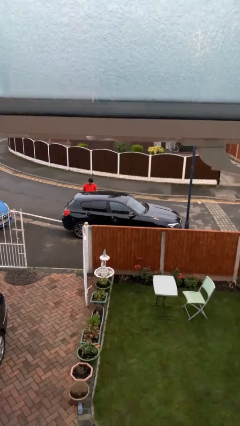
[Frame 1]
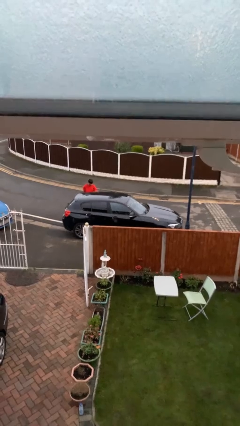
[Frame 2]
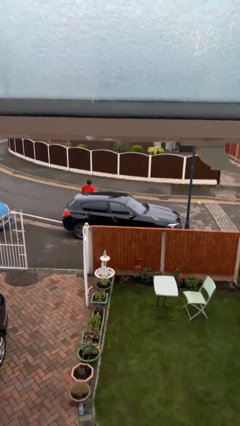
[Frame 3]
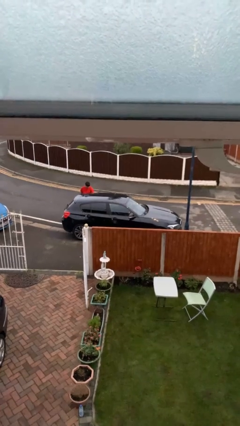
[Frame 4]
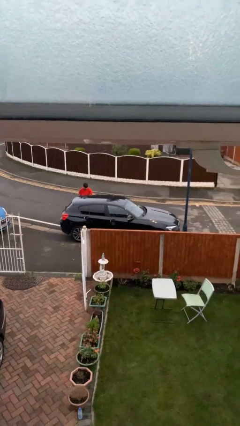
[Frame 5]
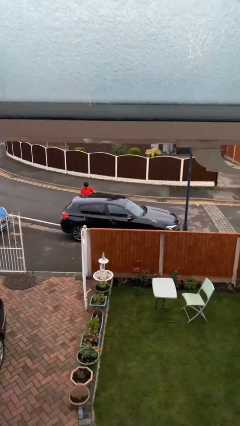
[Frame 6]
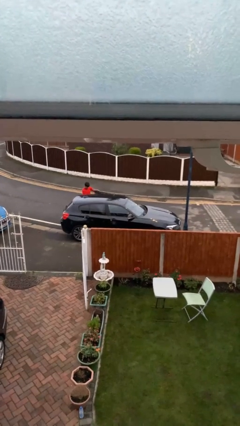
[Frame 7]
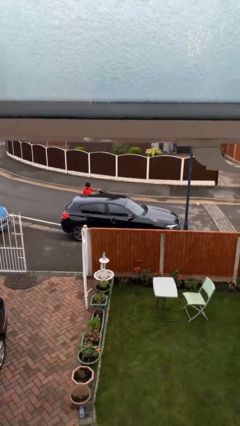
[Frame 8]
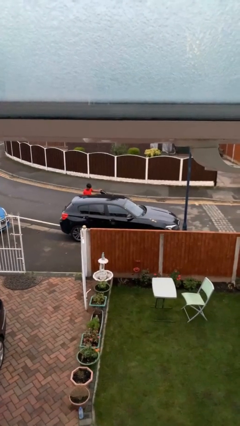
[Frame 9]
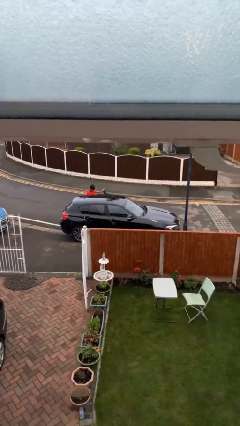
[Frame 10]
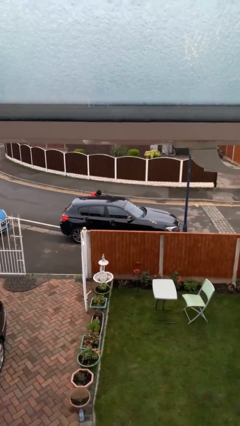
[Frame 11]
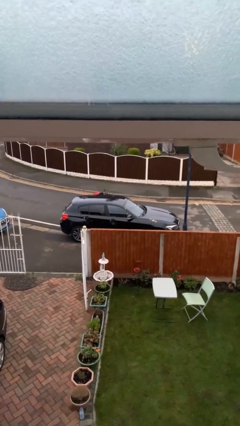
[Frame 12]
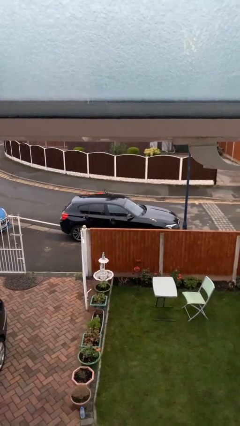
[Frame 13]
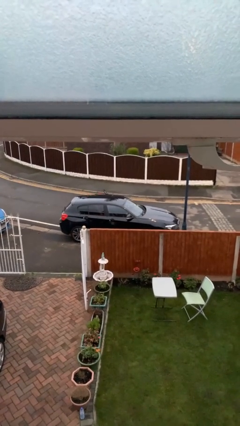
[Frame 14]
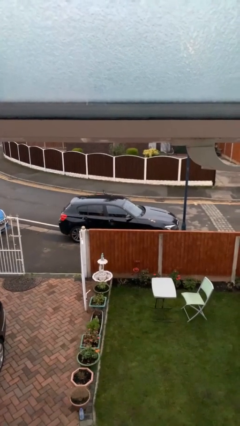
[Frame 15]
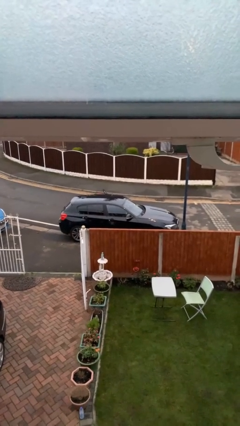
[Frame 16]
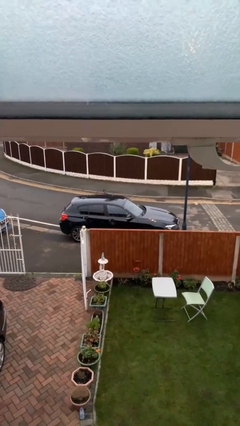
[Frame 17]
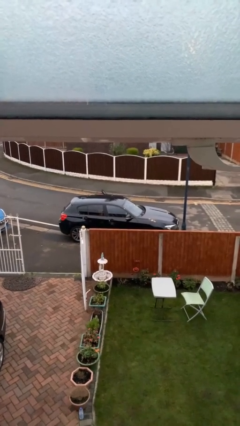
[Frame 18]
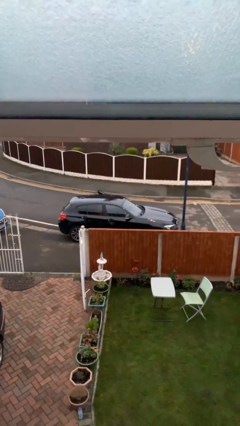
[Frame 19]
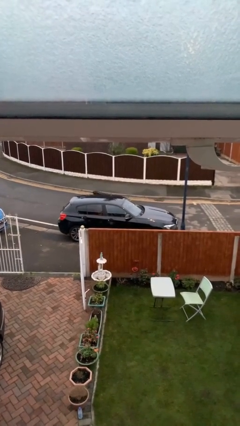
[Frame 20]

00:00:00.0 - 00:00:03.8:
car picks up person

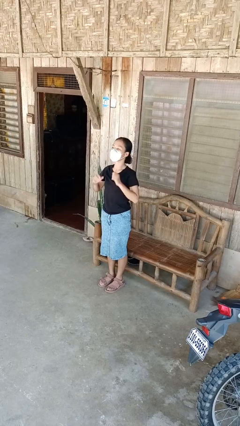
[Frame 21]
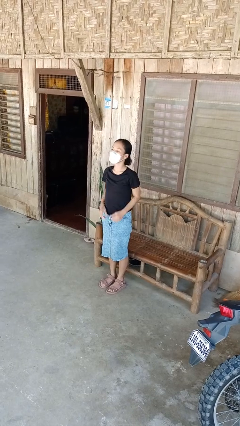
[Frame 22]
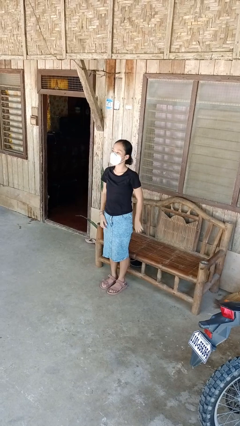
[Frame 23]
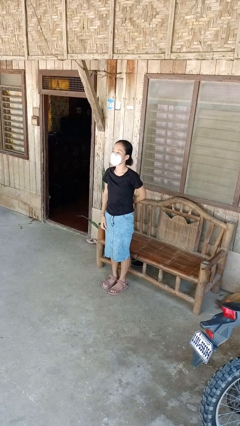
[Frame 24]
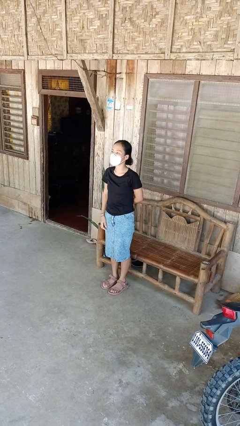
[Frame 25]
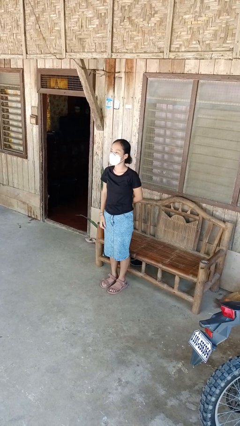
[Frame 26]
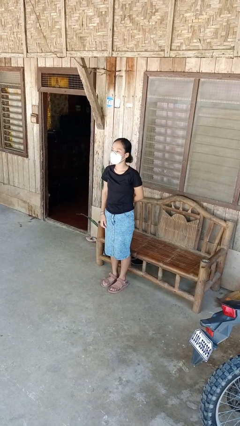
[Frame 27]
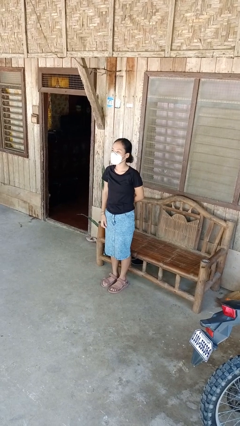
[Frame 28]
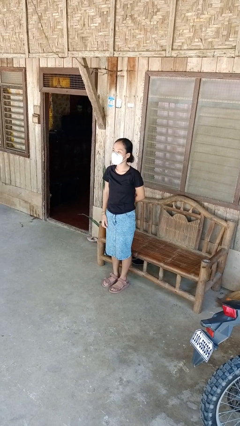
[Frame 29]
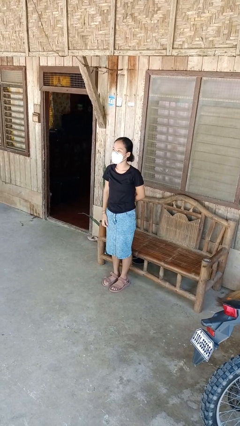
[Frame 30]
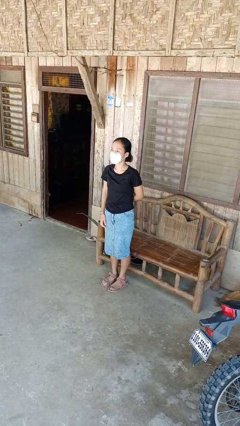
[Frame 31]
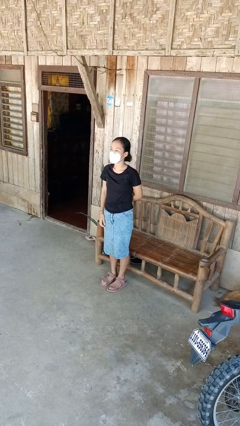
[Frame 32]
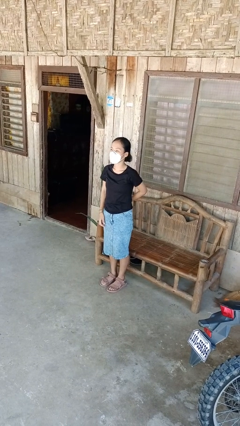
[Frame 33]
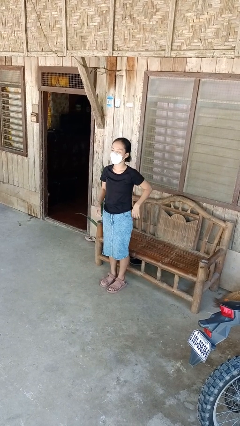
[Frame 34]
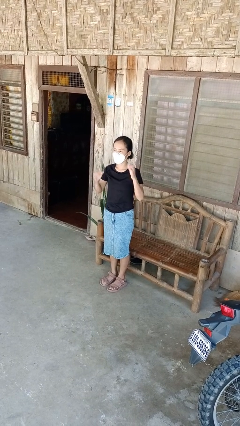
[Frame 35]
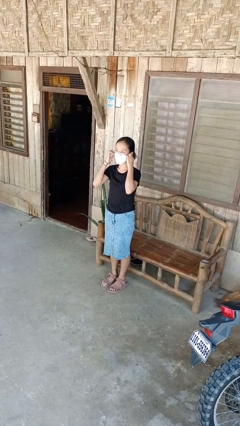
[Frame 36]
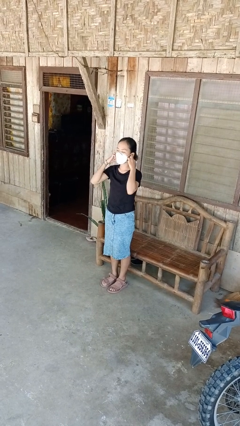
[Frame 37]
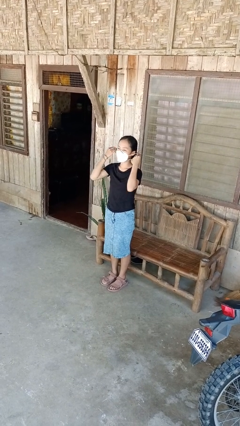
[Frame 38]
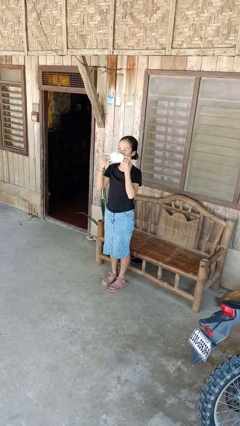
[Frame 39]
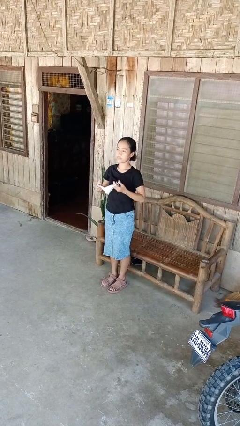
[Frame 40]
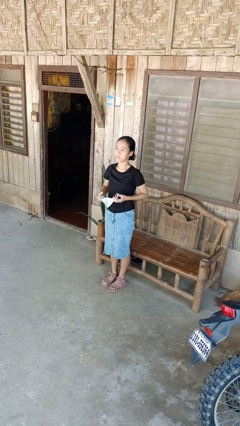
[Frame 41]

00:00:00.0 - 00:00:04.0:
person puts on facemask

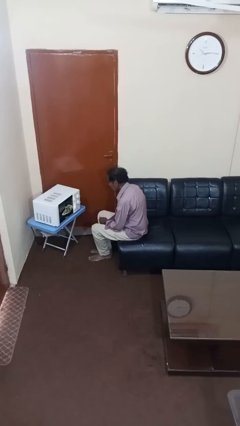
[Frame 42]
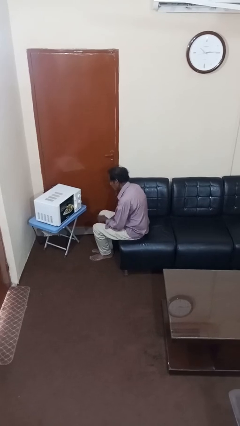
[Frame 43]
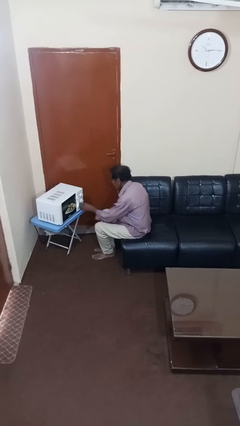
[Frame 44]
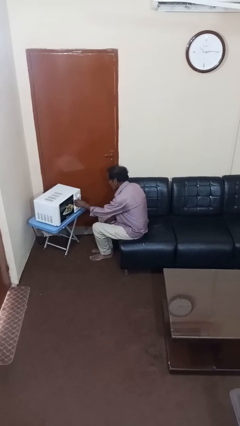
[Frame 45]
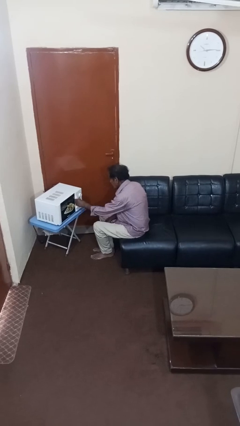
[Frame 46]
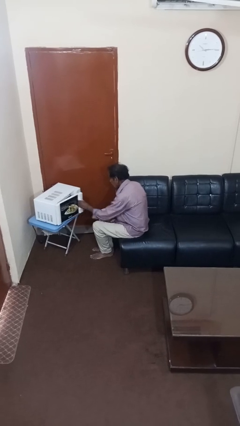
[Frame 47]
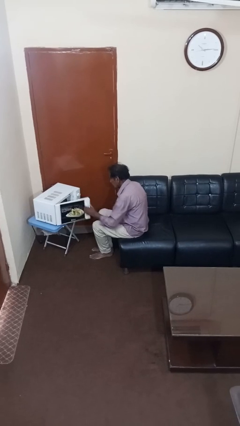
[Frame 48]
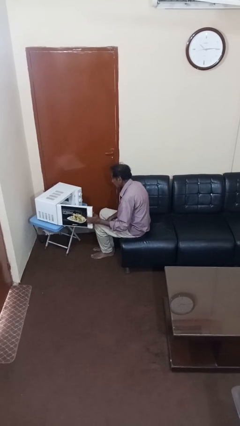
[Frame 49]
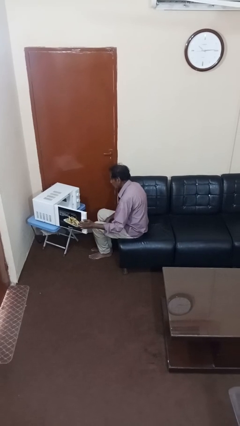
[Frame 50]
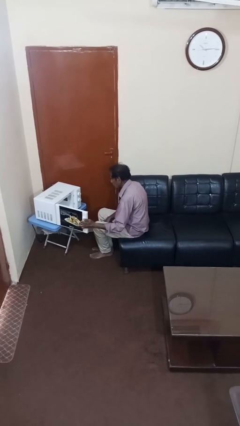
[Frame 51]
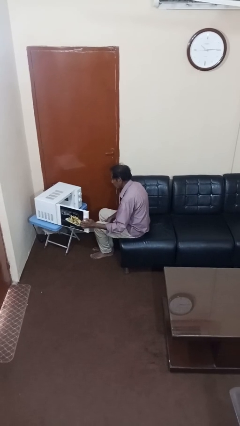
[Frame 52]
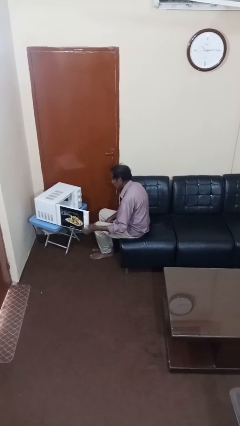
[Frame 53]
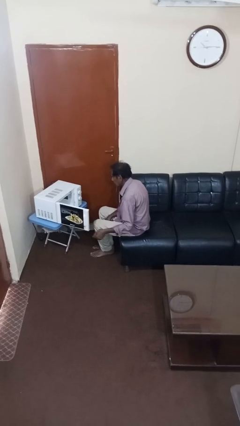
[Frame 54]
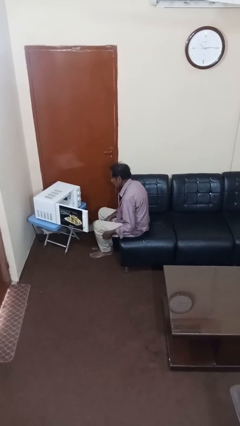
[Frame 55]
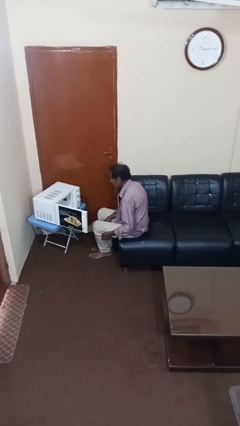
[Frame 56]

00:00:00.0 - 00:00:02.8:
person opens microwave

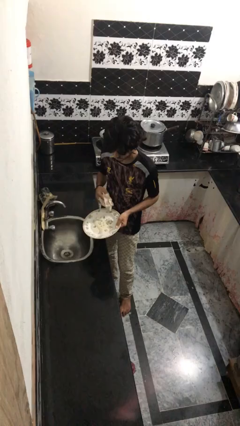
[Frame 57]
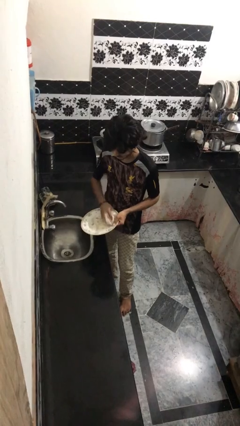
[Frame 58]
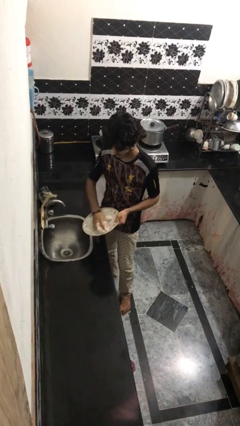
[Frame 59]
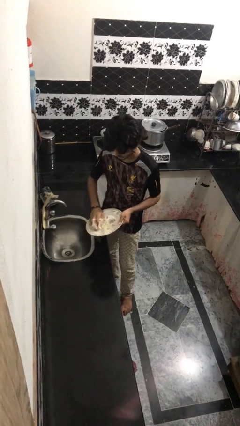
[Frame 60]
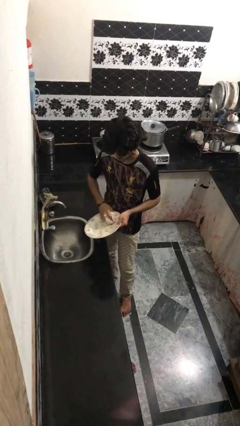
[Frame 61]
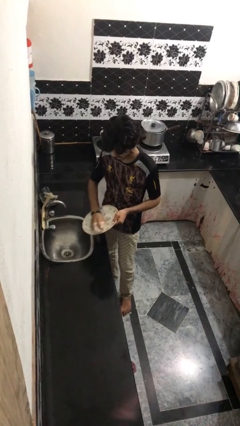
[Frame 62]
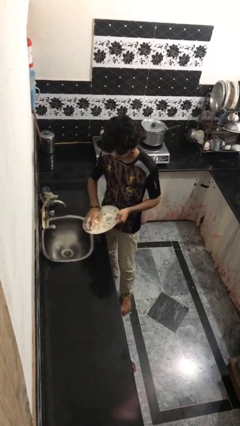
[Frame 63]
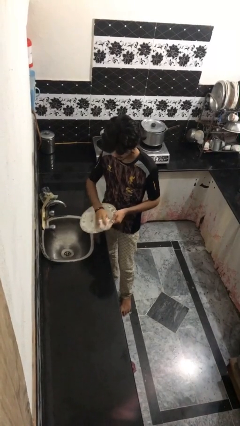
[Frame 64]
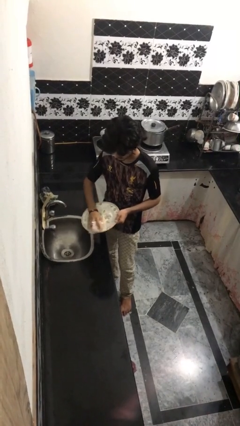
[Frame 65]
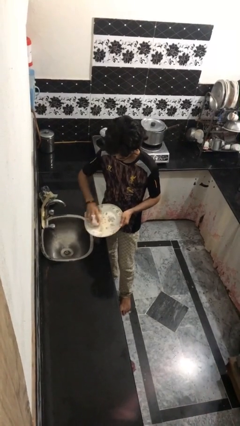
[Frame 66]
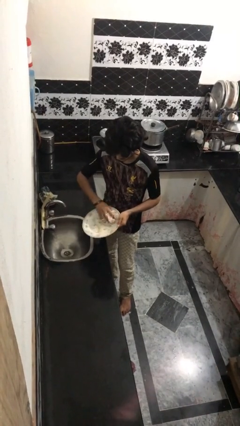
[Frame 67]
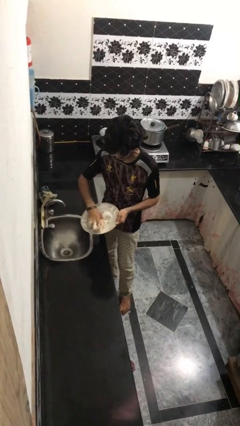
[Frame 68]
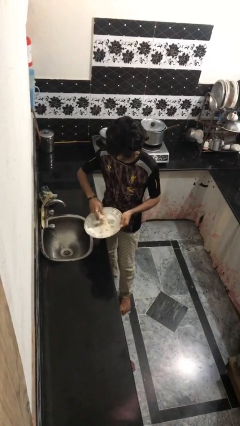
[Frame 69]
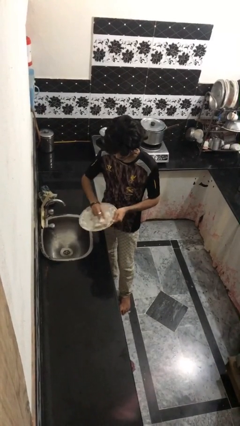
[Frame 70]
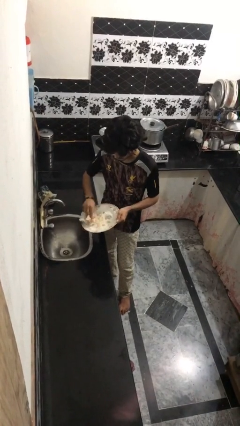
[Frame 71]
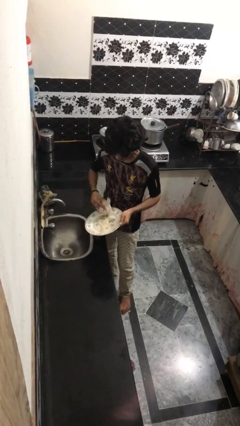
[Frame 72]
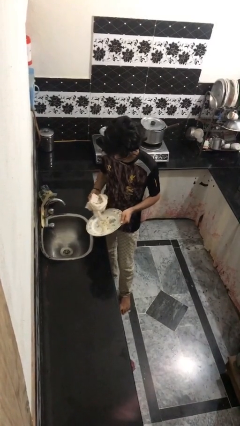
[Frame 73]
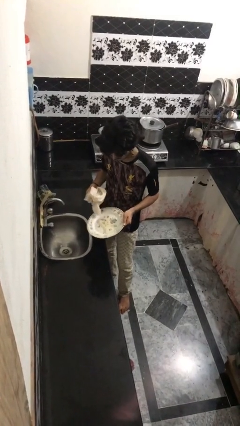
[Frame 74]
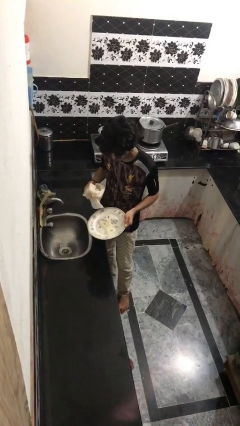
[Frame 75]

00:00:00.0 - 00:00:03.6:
person dries dish

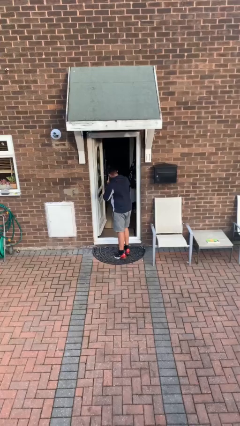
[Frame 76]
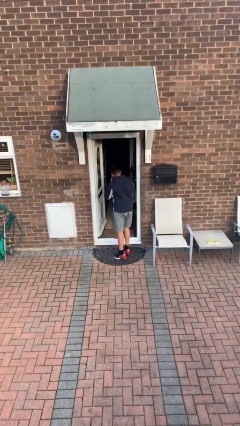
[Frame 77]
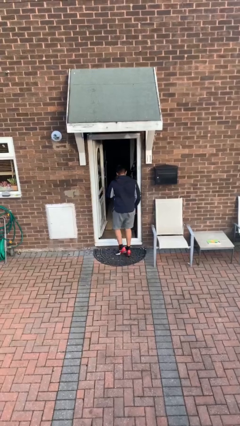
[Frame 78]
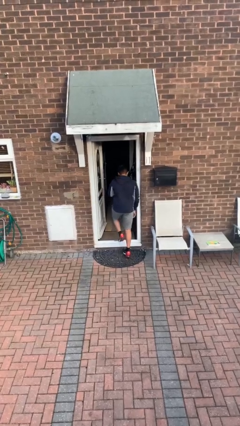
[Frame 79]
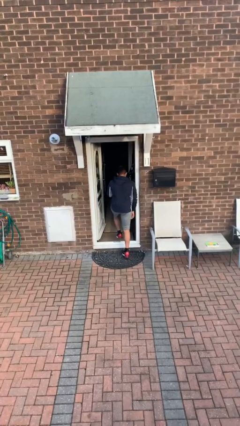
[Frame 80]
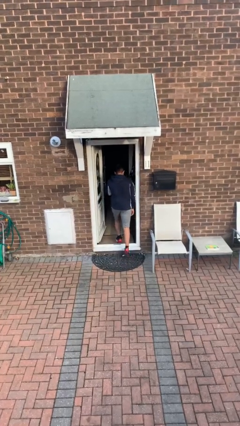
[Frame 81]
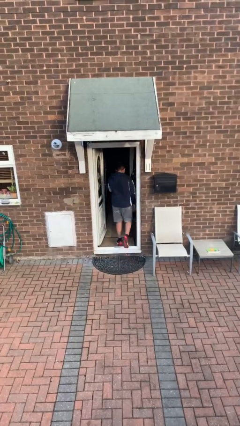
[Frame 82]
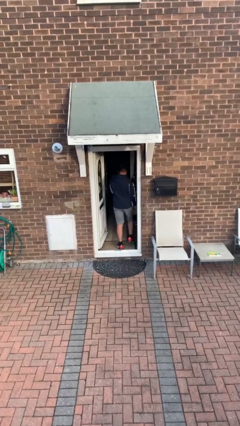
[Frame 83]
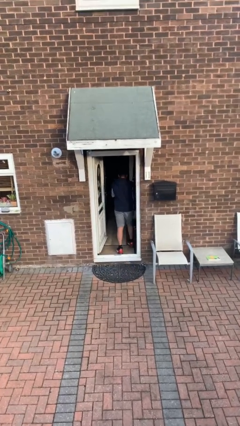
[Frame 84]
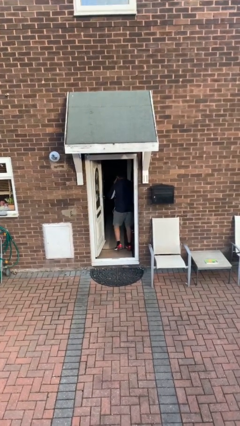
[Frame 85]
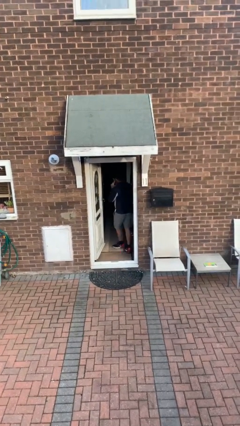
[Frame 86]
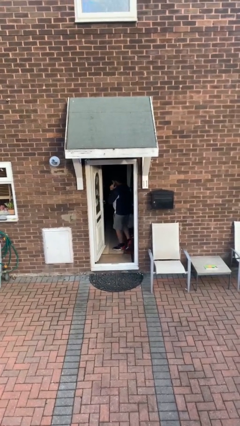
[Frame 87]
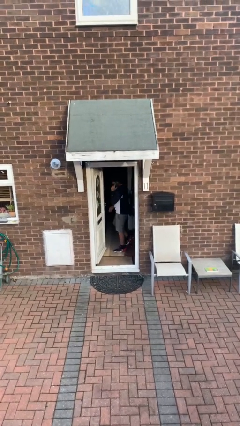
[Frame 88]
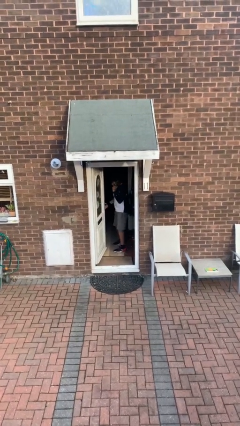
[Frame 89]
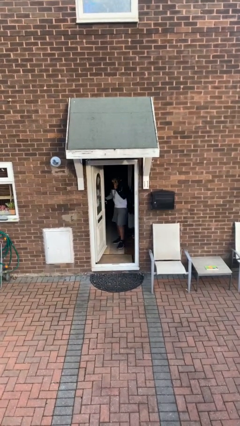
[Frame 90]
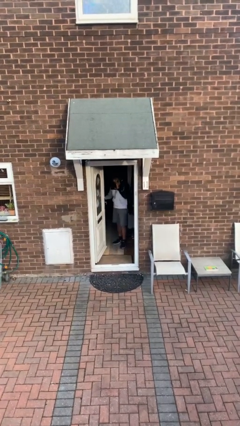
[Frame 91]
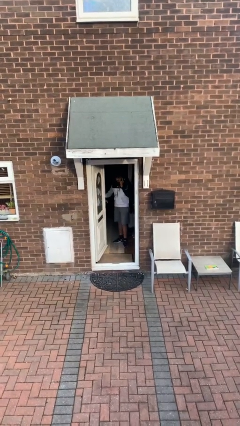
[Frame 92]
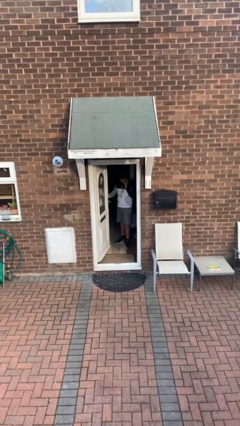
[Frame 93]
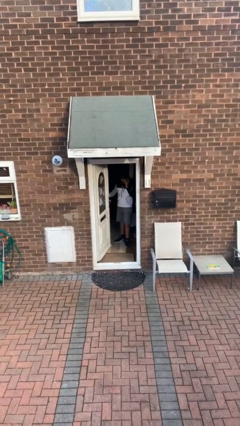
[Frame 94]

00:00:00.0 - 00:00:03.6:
person exits scene through structure
